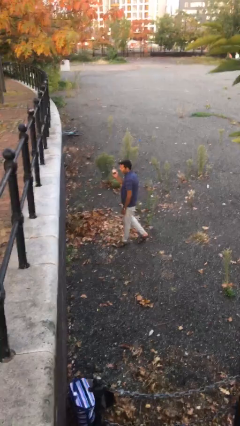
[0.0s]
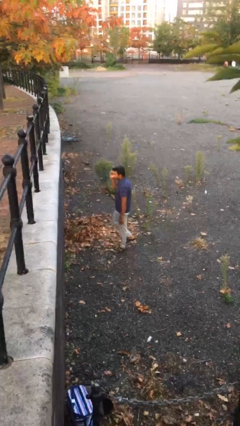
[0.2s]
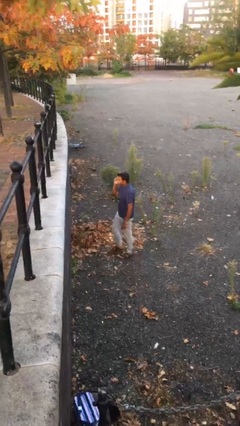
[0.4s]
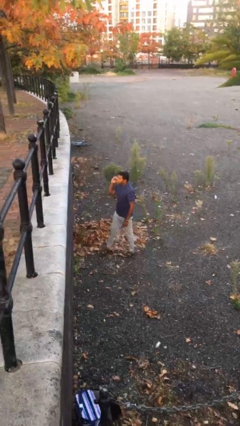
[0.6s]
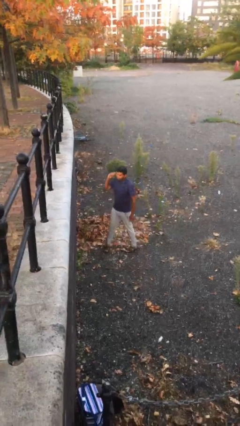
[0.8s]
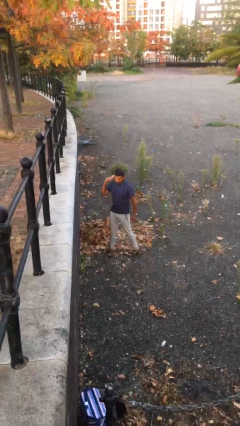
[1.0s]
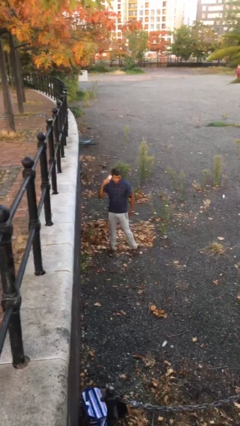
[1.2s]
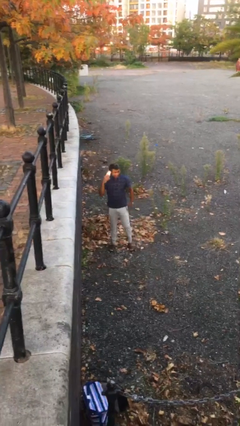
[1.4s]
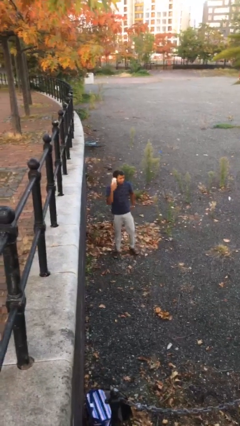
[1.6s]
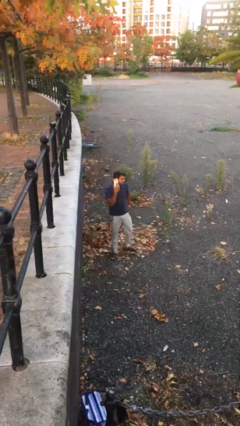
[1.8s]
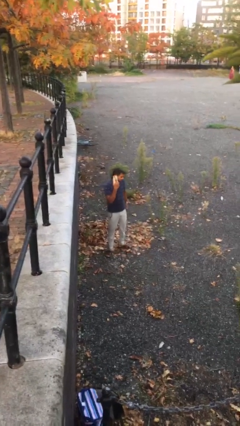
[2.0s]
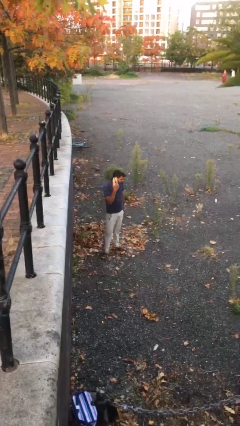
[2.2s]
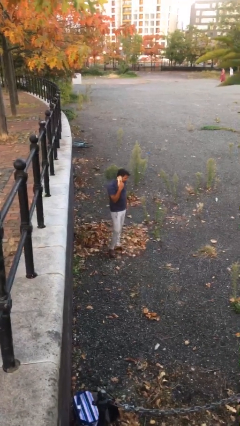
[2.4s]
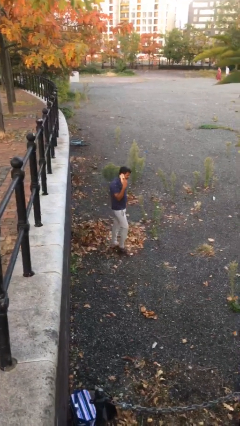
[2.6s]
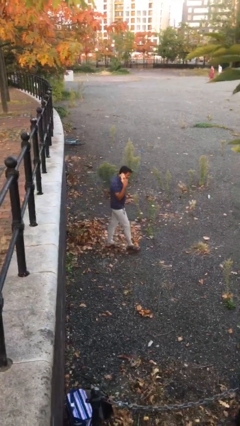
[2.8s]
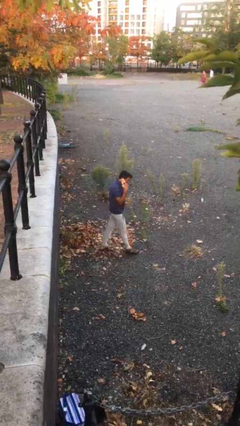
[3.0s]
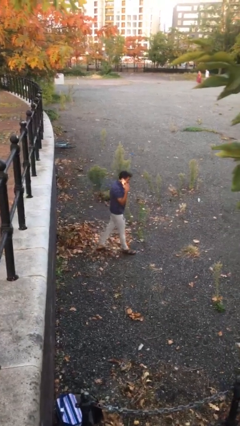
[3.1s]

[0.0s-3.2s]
person talks on phone

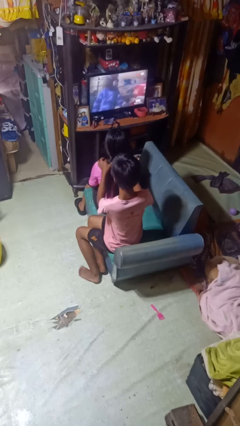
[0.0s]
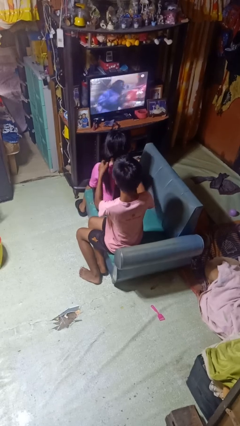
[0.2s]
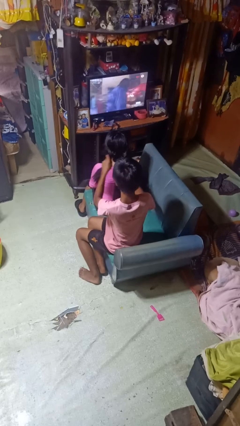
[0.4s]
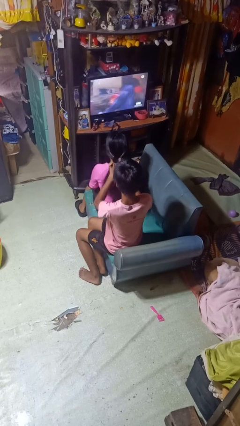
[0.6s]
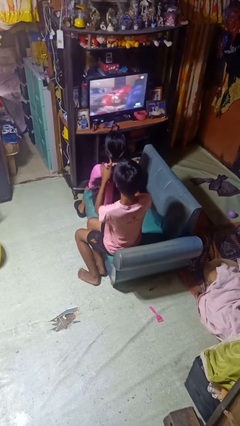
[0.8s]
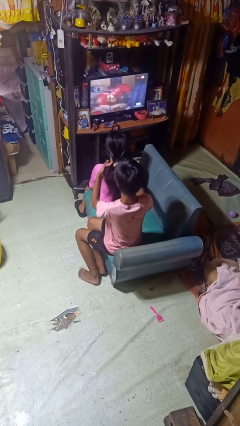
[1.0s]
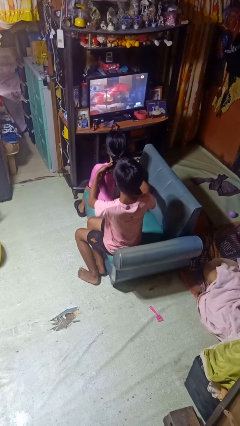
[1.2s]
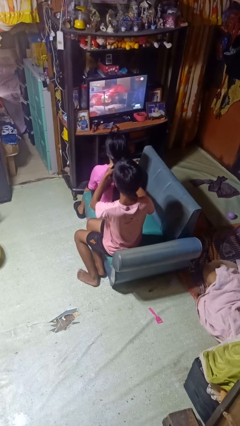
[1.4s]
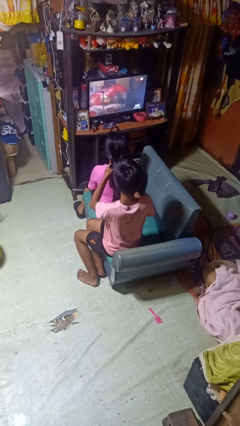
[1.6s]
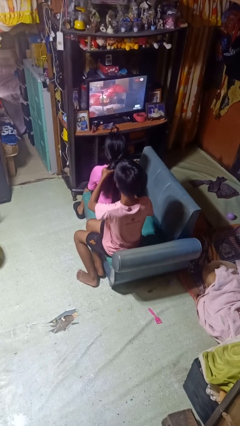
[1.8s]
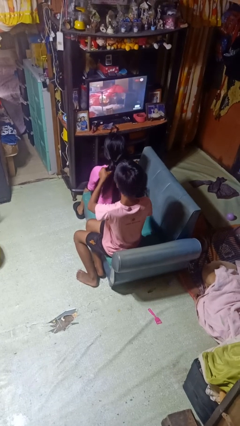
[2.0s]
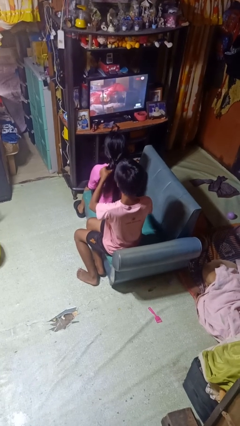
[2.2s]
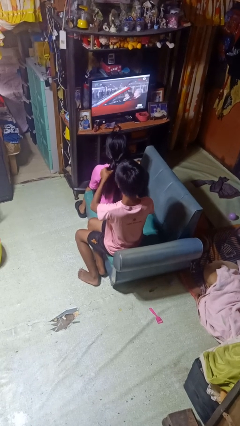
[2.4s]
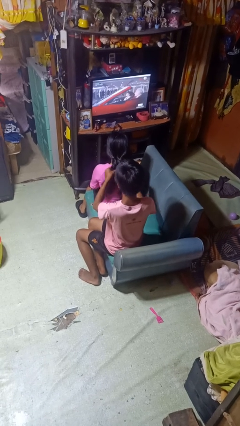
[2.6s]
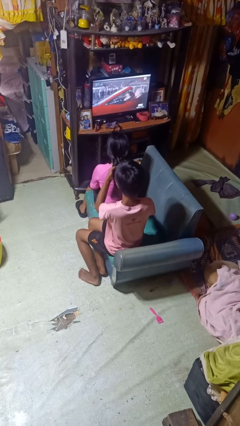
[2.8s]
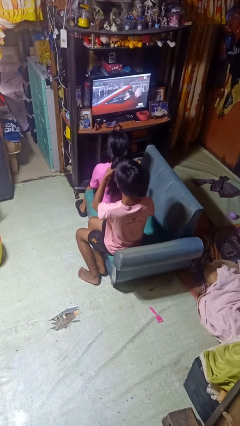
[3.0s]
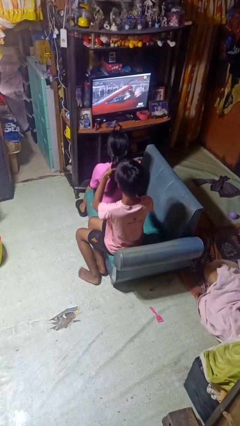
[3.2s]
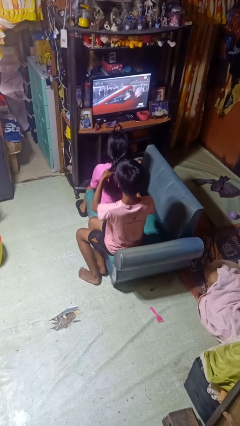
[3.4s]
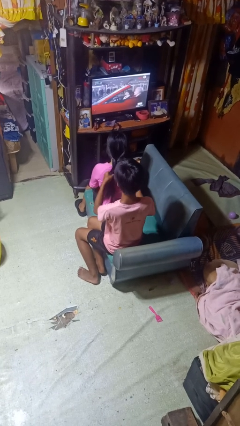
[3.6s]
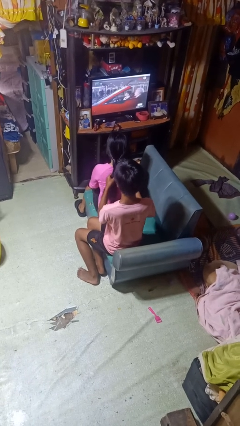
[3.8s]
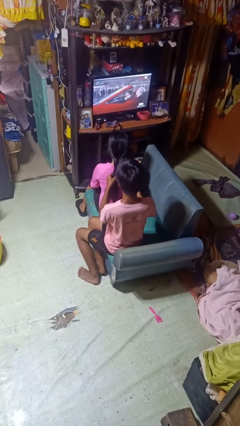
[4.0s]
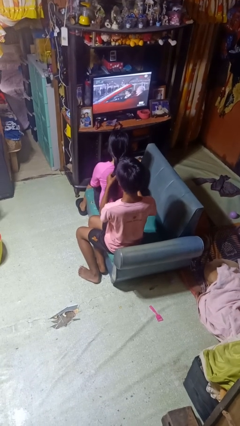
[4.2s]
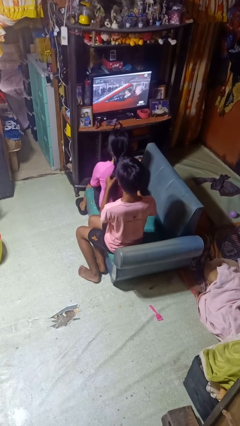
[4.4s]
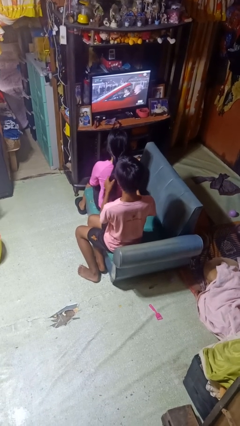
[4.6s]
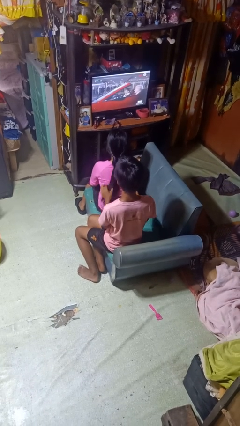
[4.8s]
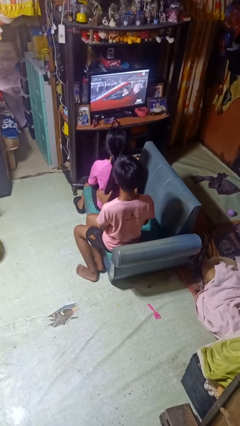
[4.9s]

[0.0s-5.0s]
person braids hair of person

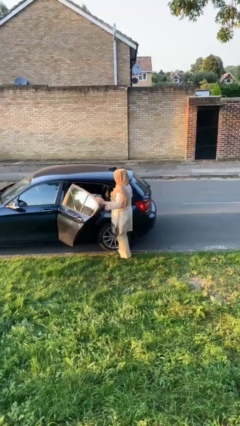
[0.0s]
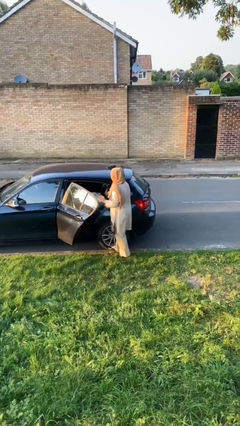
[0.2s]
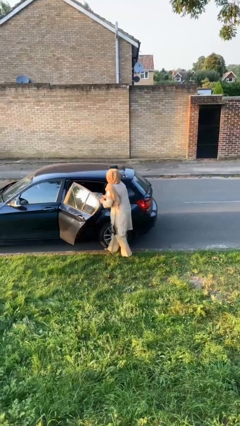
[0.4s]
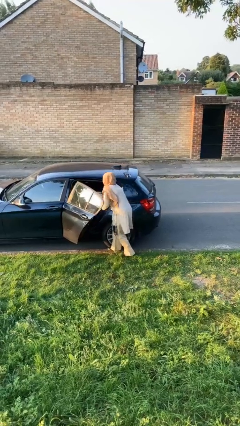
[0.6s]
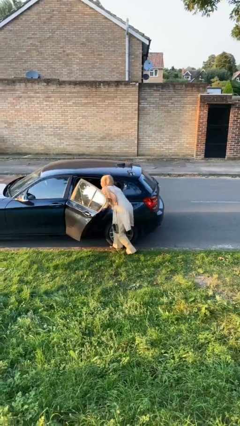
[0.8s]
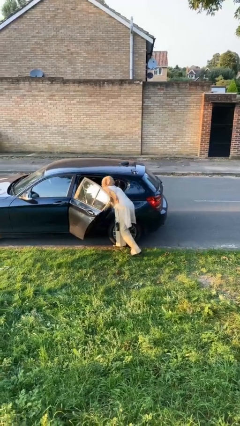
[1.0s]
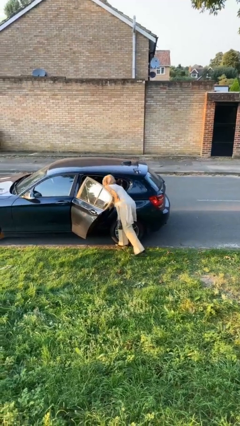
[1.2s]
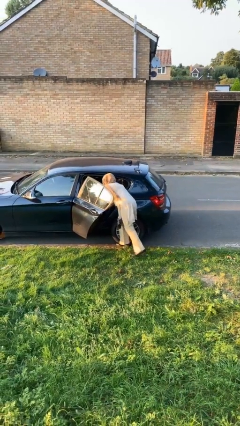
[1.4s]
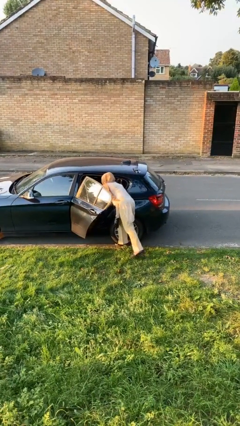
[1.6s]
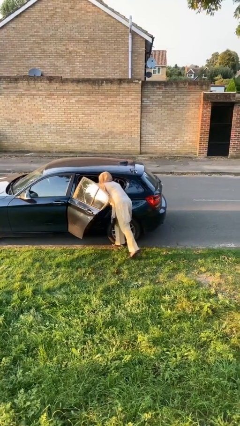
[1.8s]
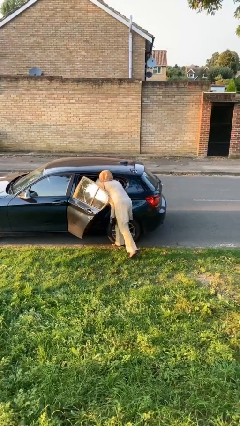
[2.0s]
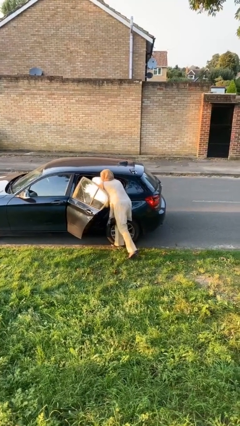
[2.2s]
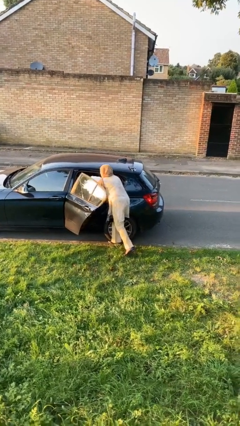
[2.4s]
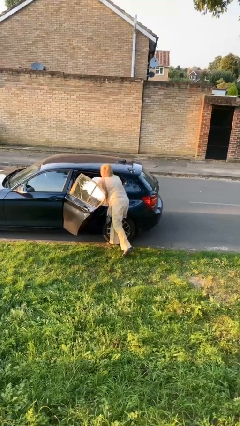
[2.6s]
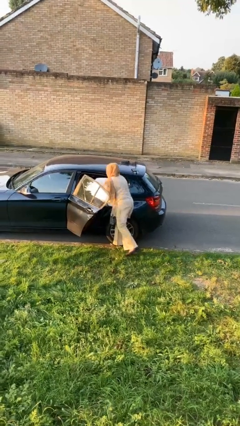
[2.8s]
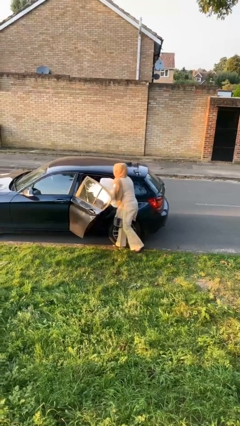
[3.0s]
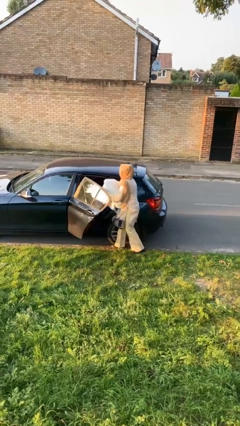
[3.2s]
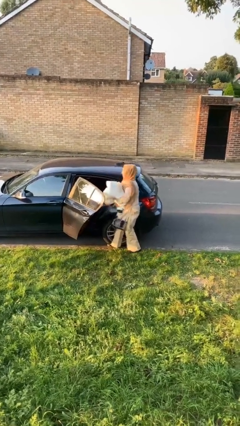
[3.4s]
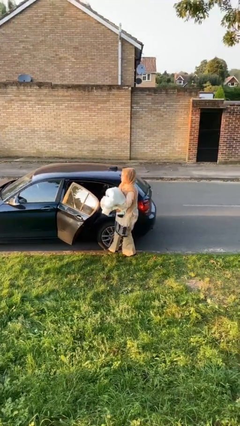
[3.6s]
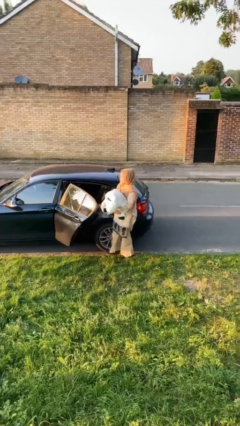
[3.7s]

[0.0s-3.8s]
person unloads car

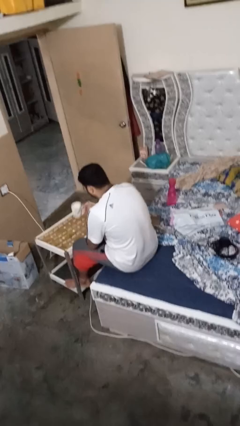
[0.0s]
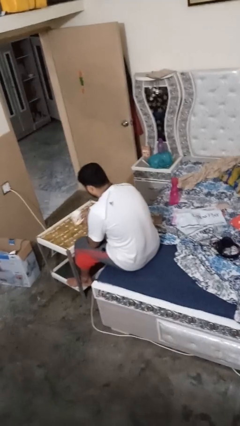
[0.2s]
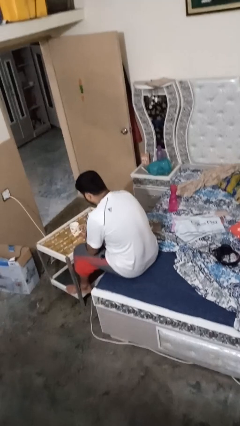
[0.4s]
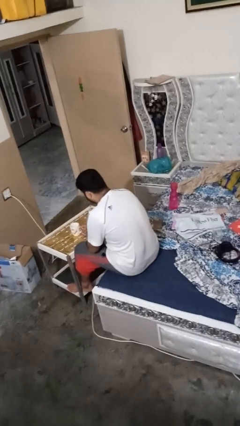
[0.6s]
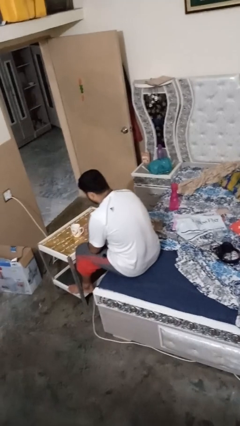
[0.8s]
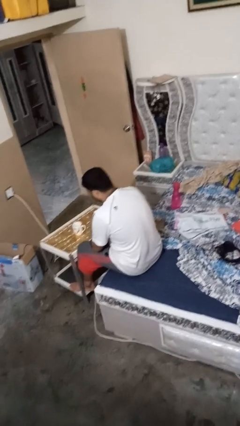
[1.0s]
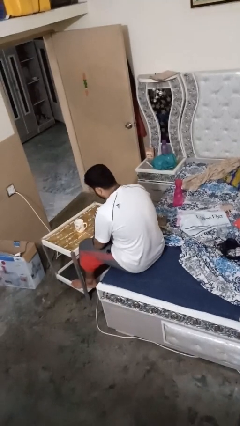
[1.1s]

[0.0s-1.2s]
person puts down object on table

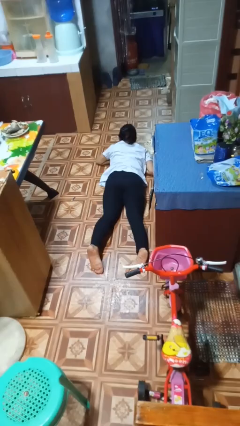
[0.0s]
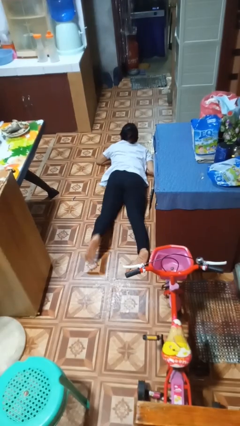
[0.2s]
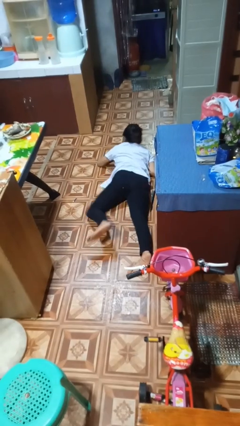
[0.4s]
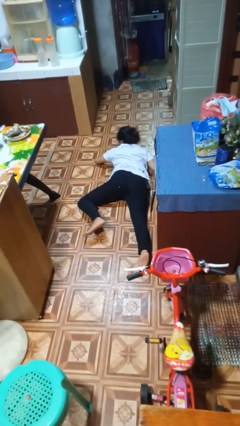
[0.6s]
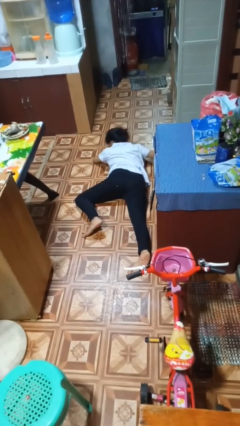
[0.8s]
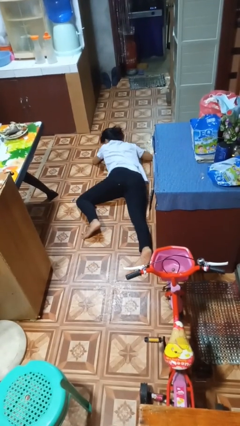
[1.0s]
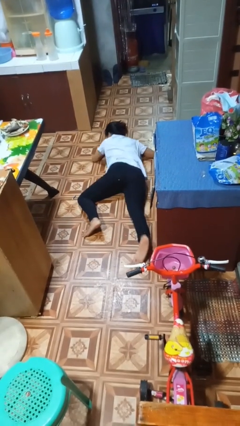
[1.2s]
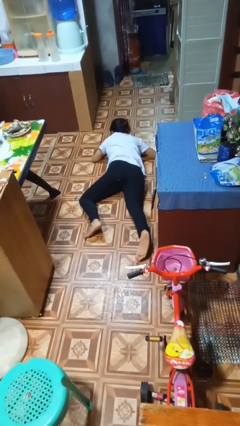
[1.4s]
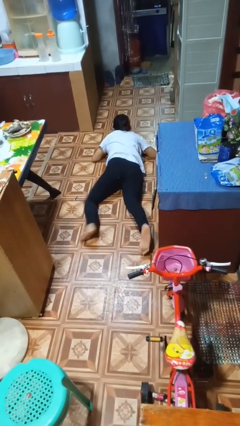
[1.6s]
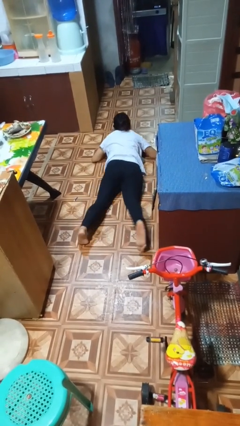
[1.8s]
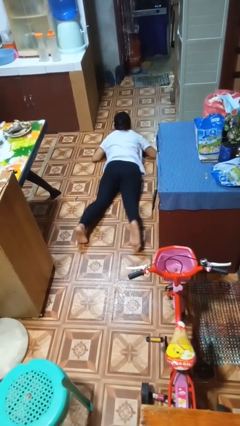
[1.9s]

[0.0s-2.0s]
person crawls

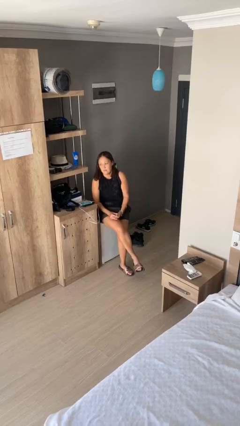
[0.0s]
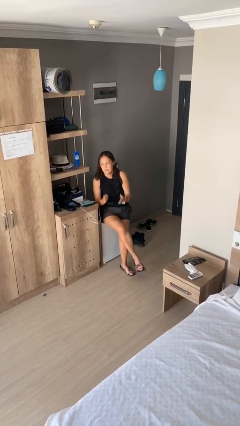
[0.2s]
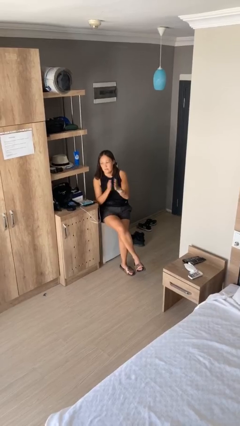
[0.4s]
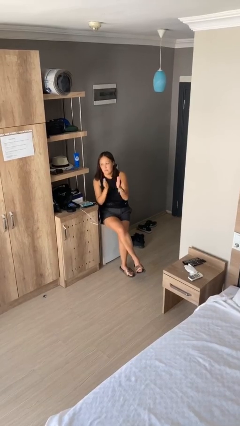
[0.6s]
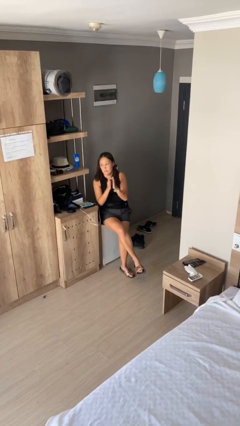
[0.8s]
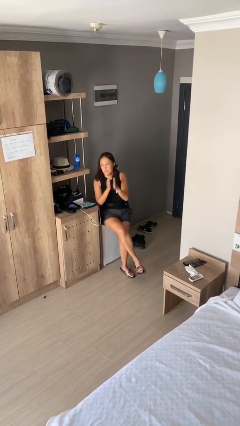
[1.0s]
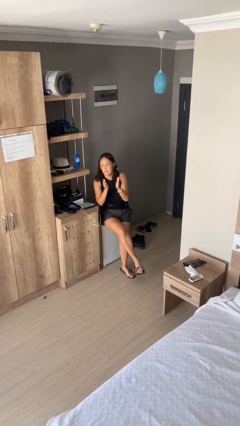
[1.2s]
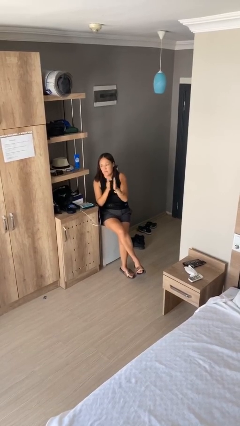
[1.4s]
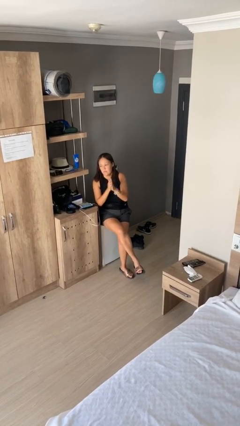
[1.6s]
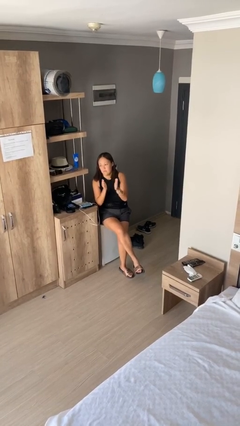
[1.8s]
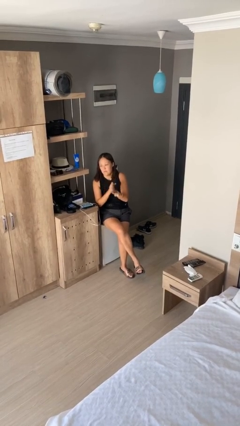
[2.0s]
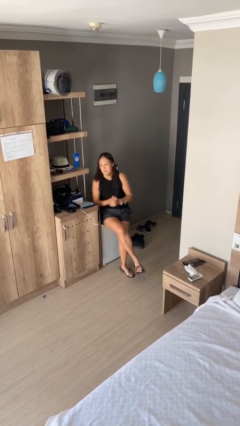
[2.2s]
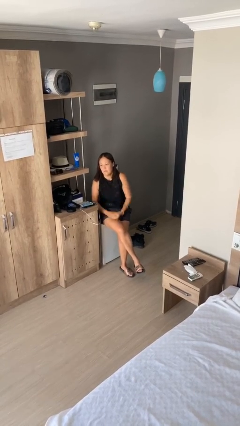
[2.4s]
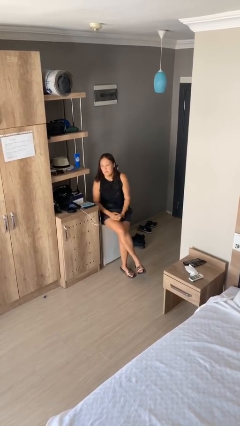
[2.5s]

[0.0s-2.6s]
person claps hands
